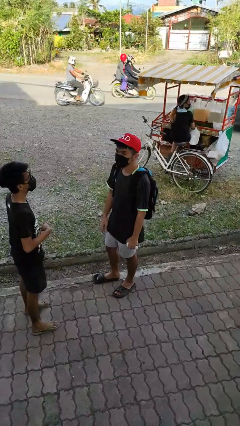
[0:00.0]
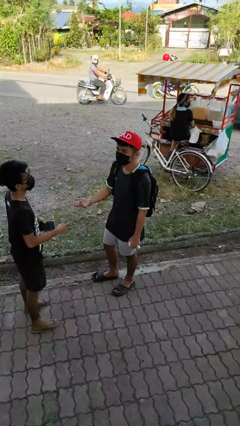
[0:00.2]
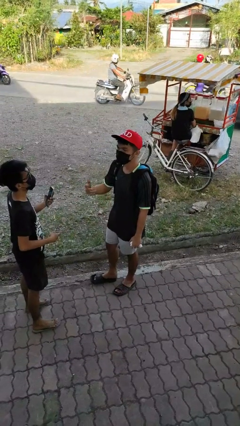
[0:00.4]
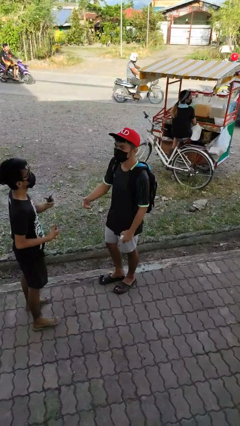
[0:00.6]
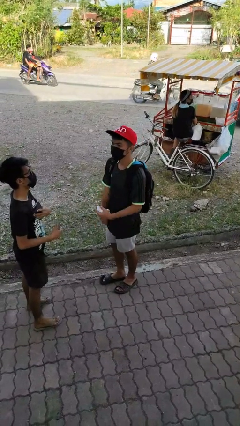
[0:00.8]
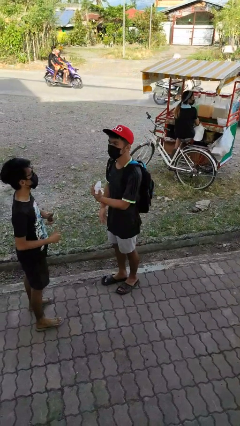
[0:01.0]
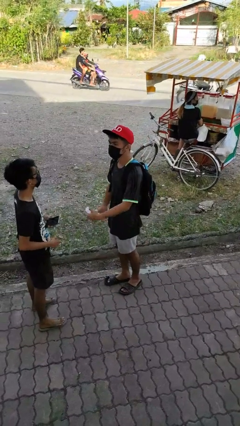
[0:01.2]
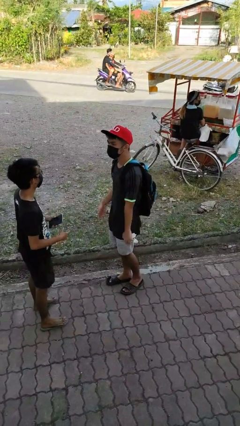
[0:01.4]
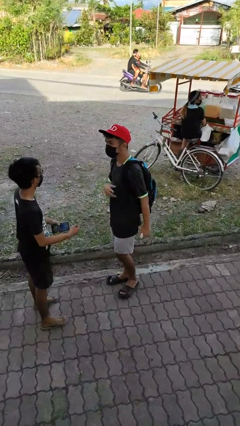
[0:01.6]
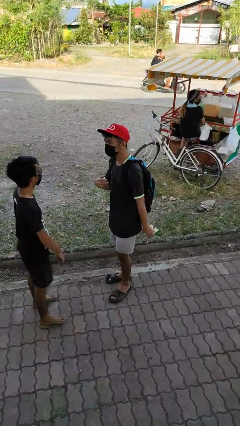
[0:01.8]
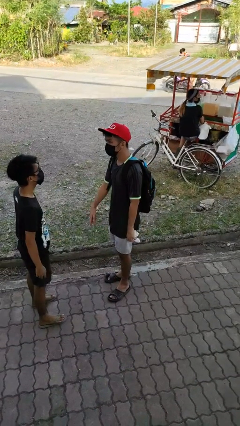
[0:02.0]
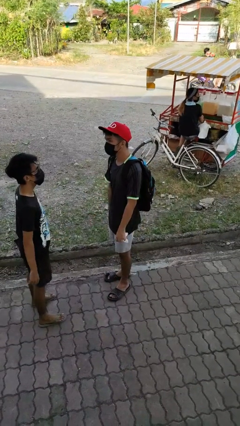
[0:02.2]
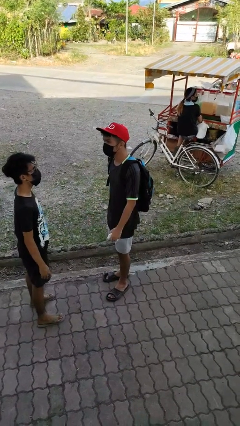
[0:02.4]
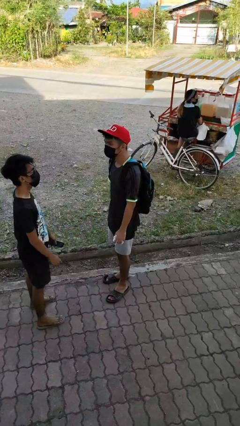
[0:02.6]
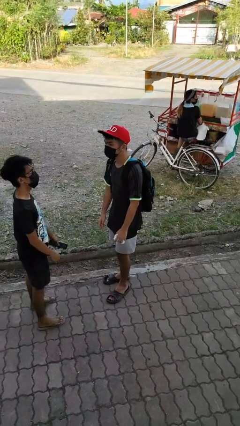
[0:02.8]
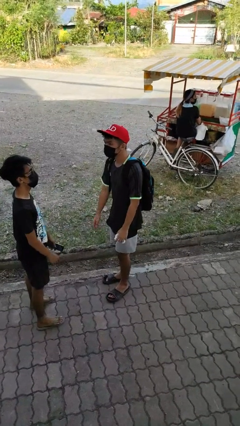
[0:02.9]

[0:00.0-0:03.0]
person talks to person

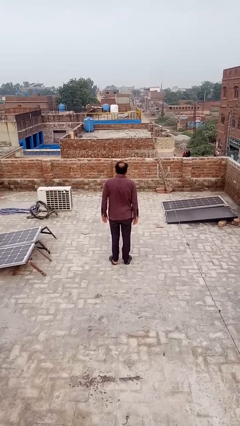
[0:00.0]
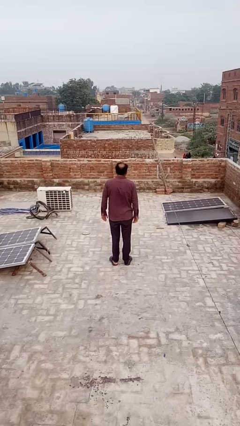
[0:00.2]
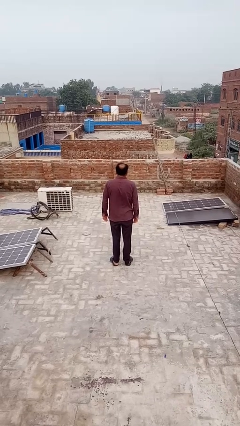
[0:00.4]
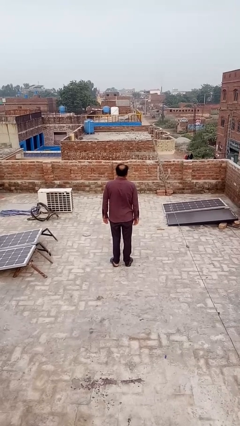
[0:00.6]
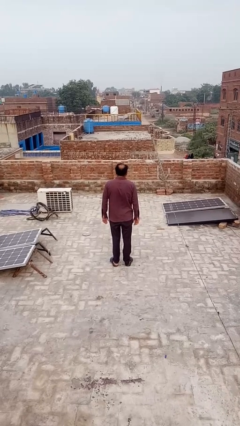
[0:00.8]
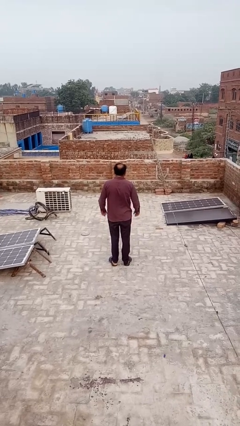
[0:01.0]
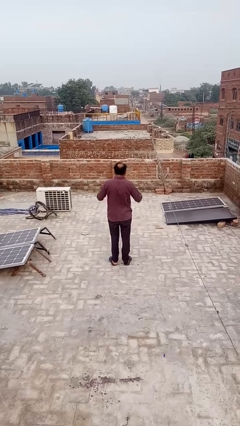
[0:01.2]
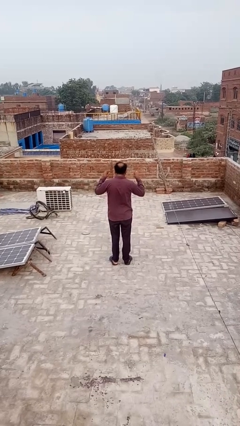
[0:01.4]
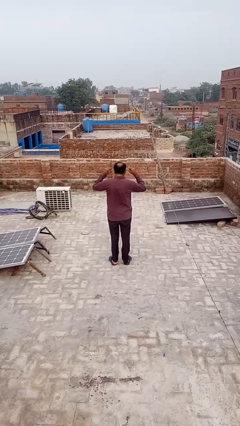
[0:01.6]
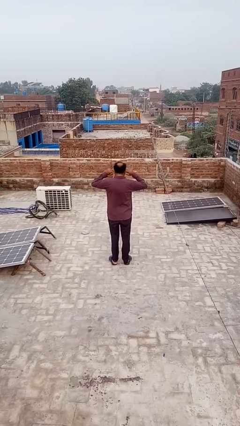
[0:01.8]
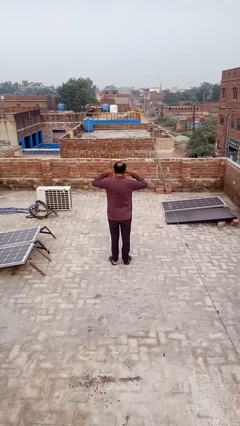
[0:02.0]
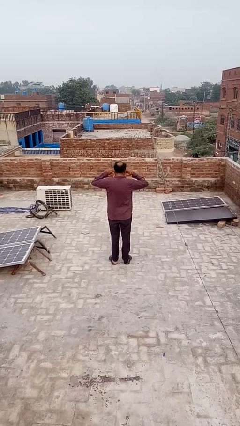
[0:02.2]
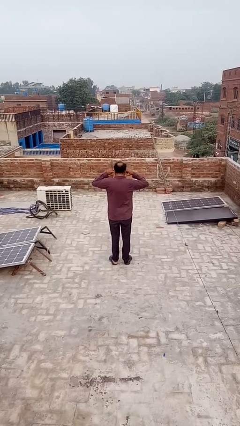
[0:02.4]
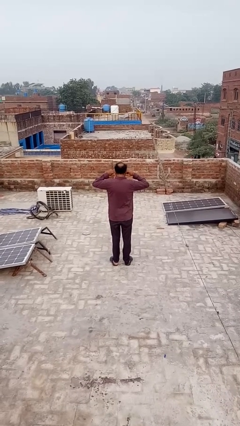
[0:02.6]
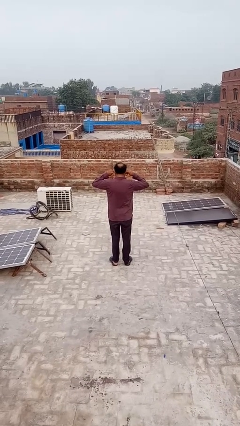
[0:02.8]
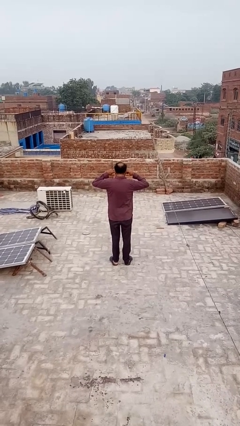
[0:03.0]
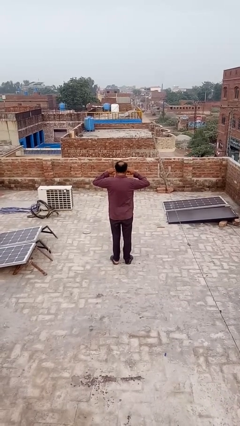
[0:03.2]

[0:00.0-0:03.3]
person puts fingers in ear

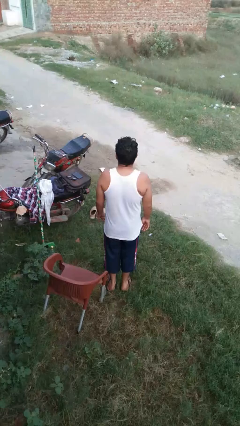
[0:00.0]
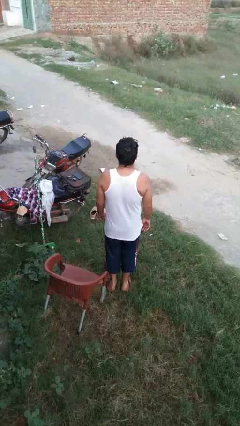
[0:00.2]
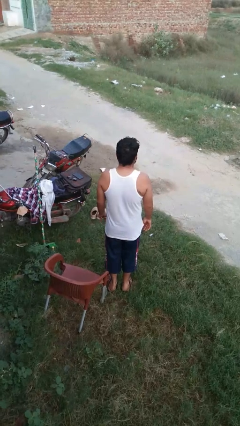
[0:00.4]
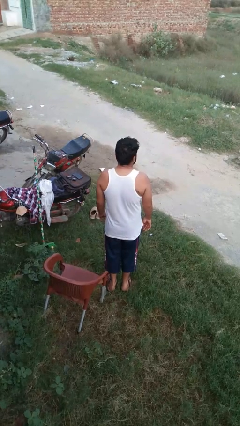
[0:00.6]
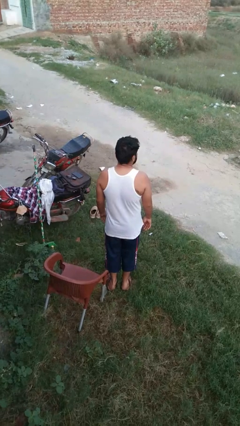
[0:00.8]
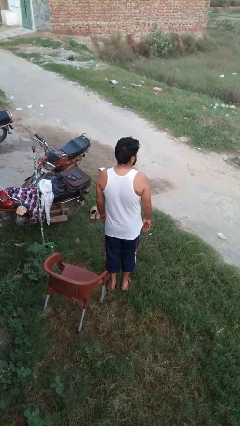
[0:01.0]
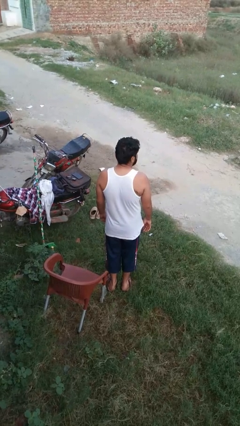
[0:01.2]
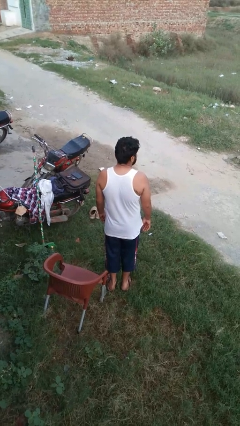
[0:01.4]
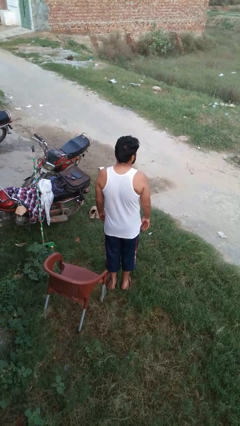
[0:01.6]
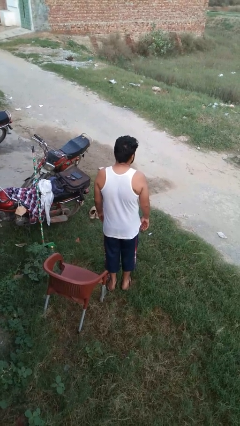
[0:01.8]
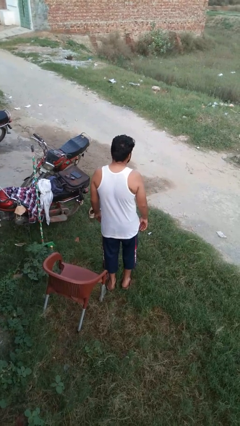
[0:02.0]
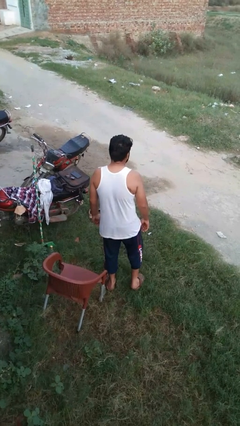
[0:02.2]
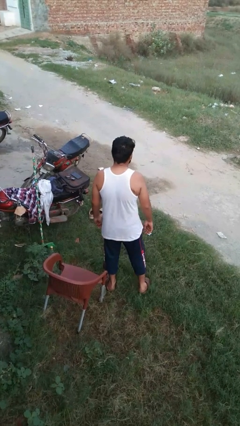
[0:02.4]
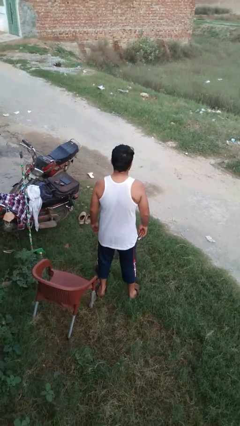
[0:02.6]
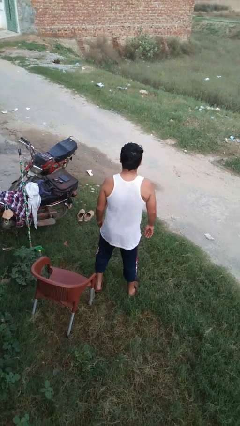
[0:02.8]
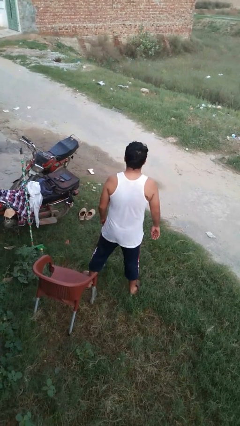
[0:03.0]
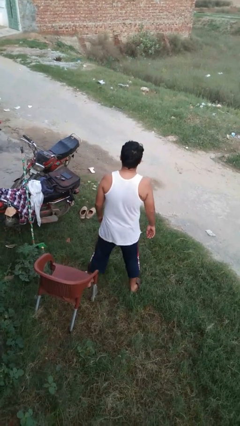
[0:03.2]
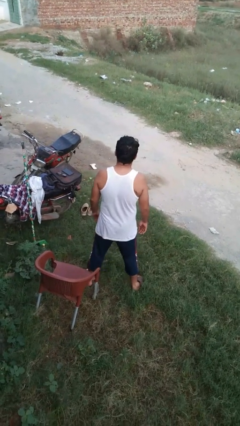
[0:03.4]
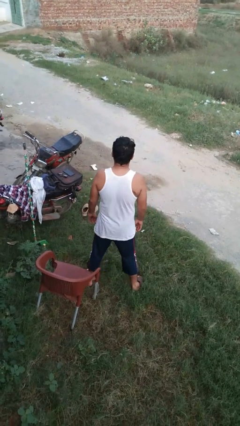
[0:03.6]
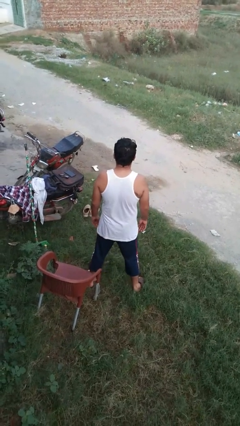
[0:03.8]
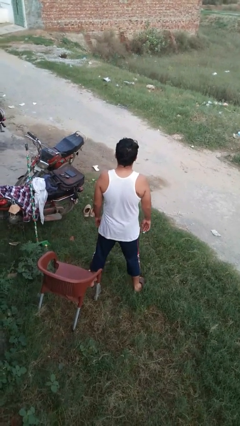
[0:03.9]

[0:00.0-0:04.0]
person stretches back

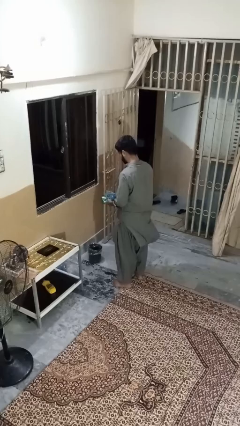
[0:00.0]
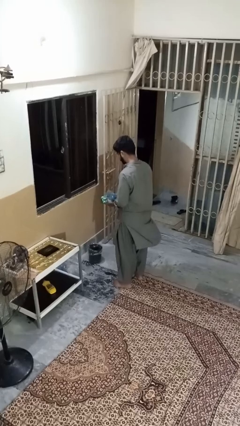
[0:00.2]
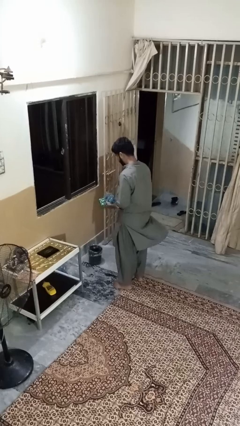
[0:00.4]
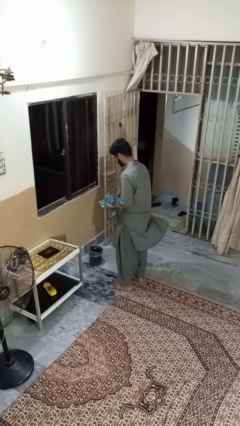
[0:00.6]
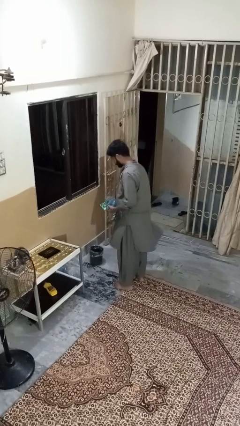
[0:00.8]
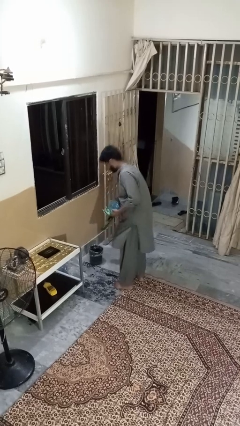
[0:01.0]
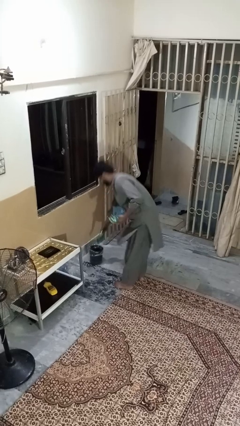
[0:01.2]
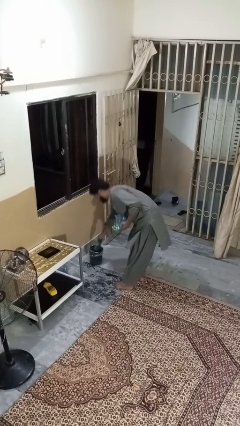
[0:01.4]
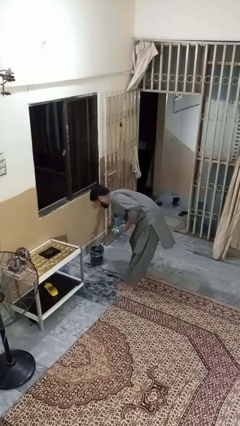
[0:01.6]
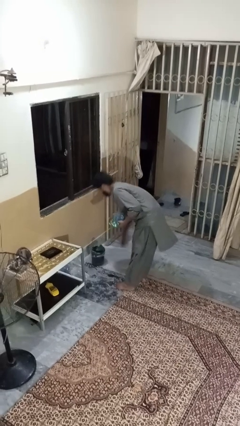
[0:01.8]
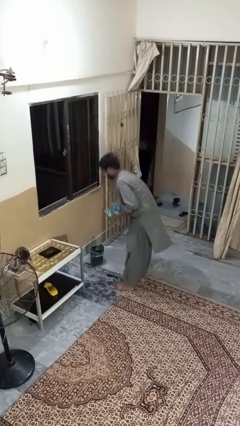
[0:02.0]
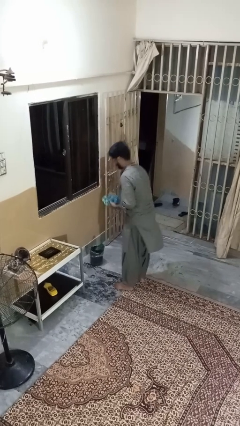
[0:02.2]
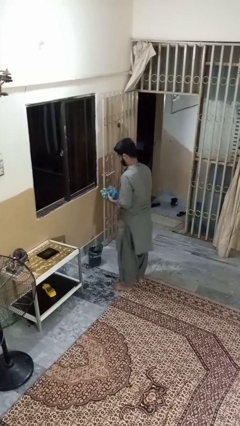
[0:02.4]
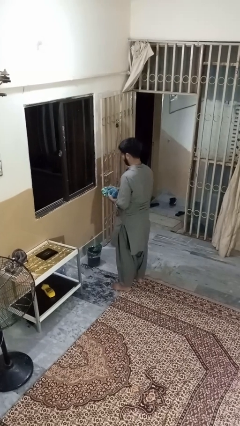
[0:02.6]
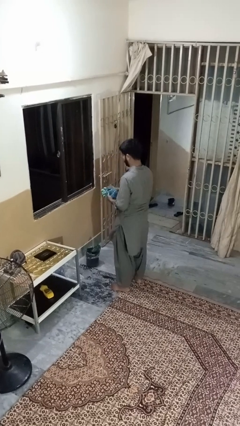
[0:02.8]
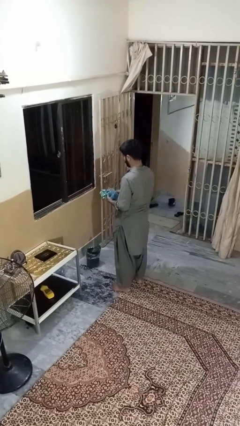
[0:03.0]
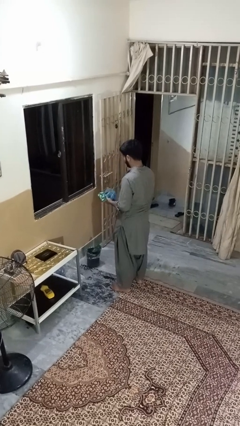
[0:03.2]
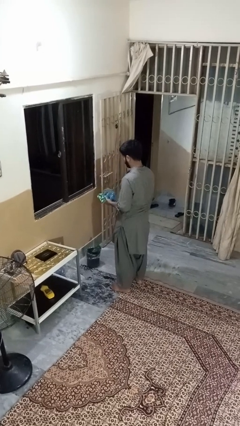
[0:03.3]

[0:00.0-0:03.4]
person discards trash

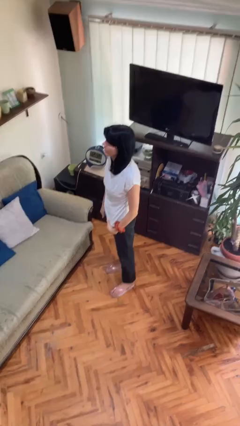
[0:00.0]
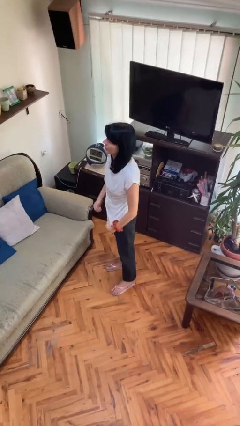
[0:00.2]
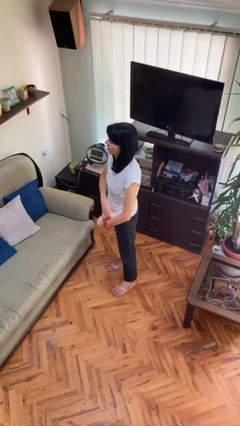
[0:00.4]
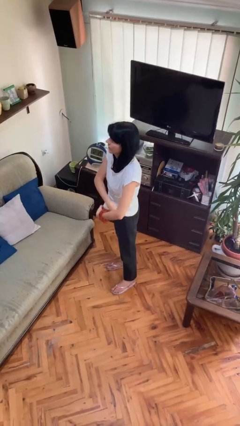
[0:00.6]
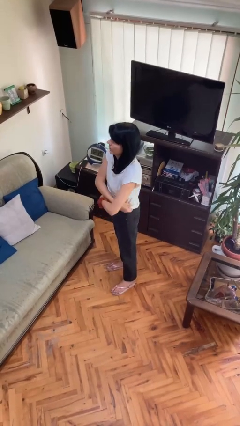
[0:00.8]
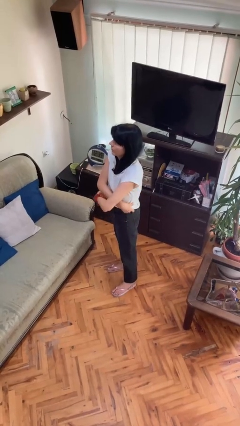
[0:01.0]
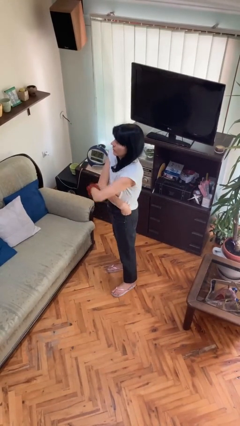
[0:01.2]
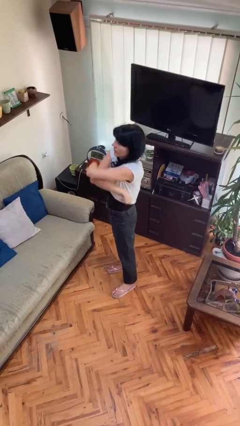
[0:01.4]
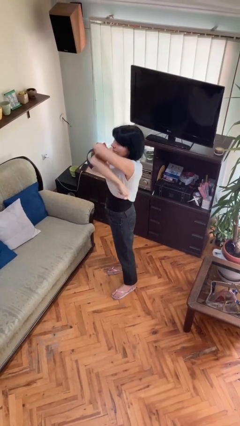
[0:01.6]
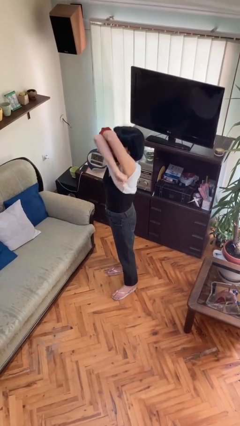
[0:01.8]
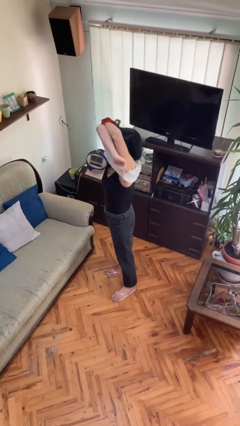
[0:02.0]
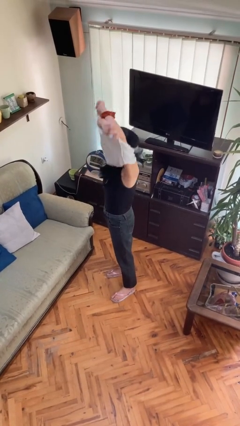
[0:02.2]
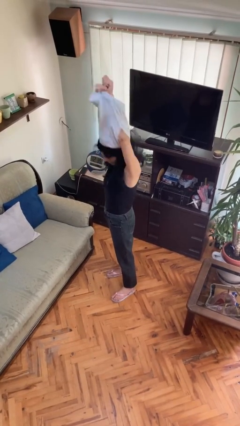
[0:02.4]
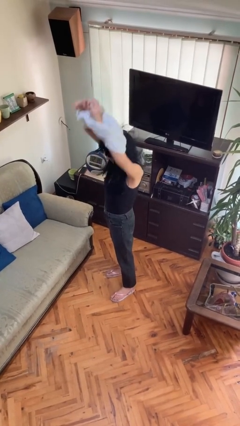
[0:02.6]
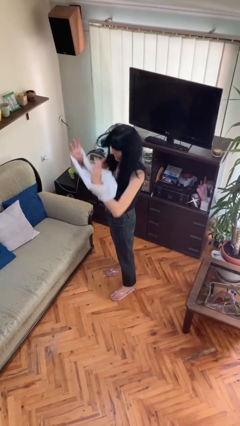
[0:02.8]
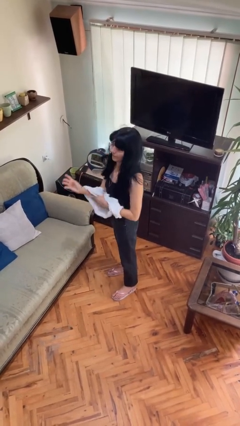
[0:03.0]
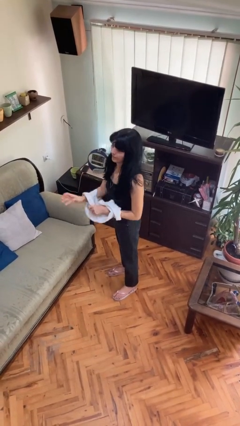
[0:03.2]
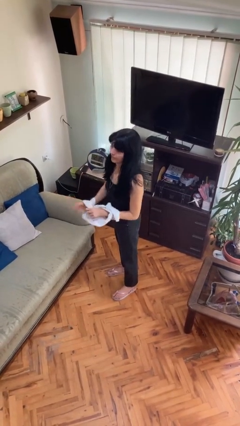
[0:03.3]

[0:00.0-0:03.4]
person takes off shirt

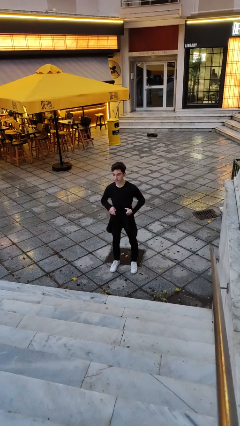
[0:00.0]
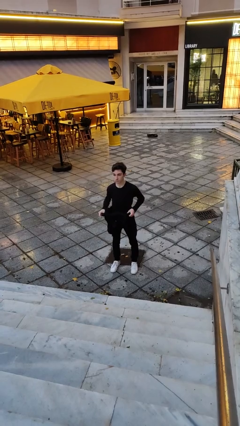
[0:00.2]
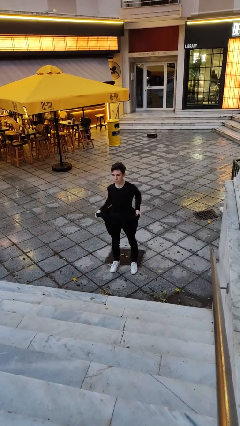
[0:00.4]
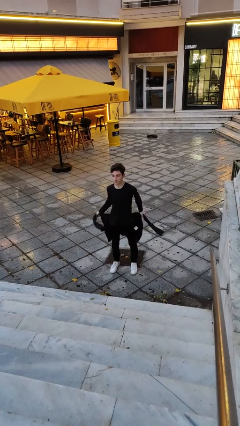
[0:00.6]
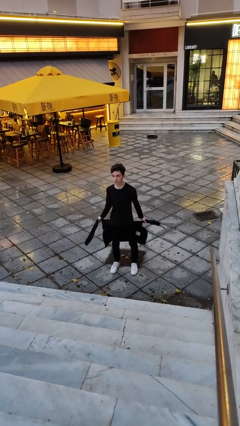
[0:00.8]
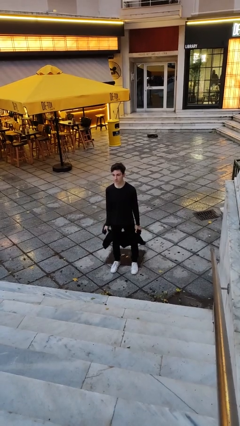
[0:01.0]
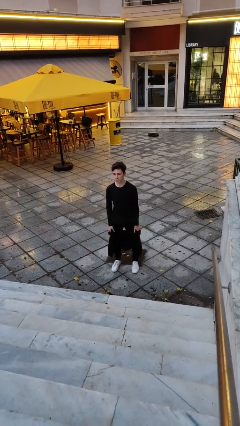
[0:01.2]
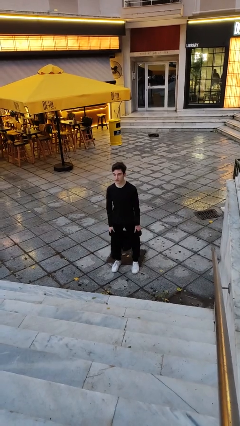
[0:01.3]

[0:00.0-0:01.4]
person unties jacket around waist
